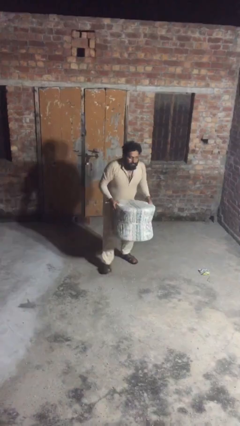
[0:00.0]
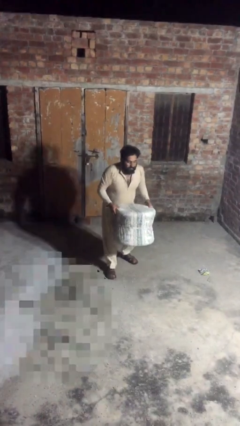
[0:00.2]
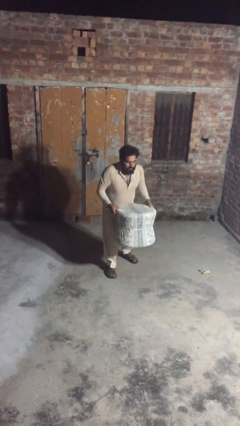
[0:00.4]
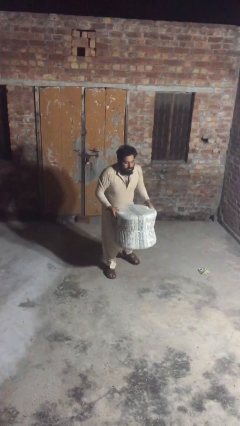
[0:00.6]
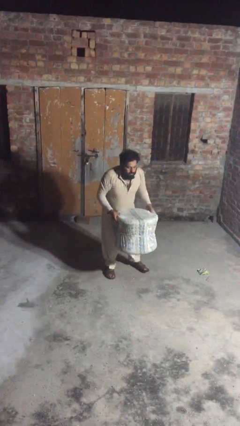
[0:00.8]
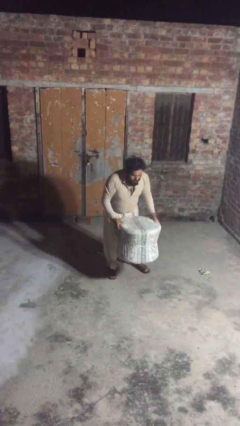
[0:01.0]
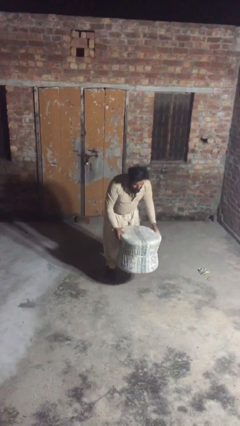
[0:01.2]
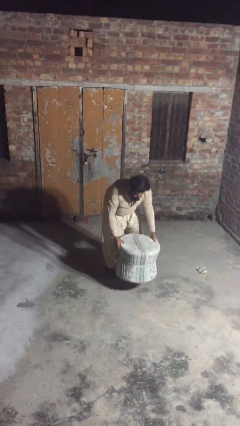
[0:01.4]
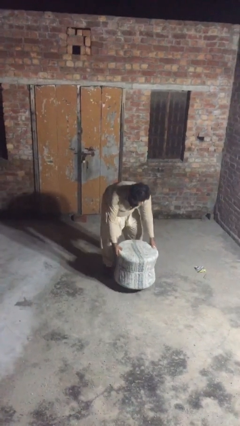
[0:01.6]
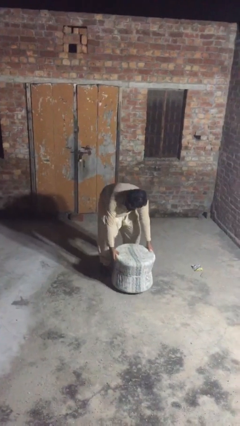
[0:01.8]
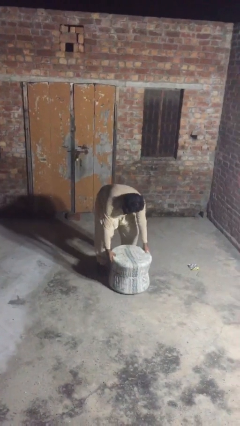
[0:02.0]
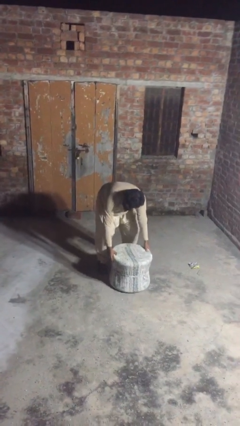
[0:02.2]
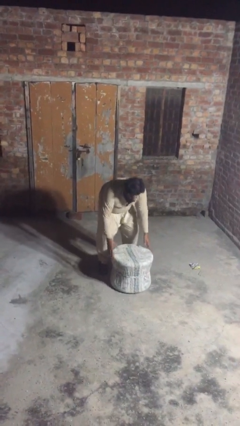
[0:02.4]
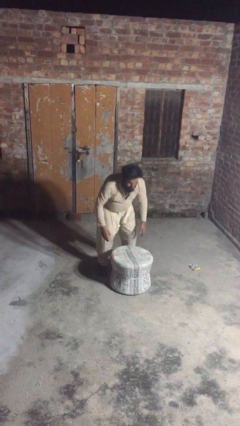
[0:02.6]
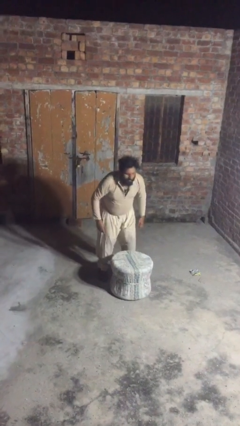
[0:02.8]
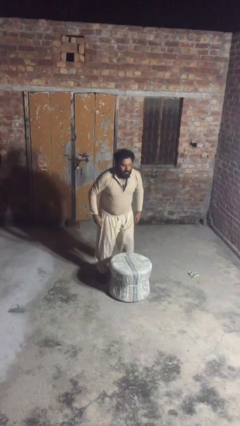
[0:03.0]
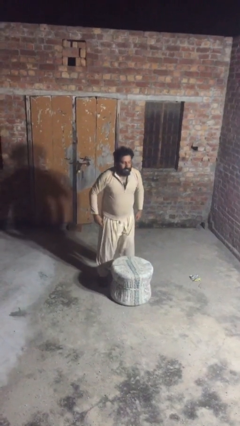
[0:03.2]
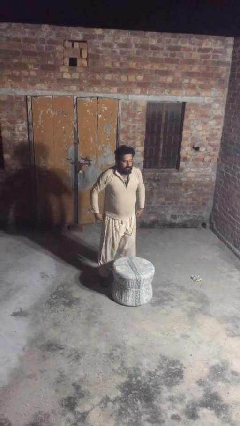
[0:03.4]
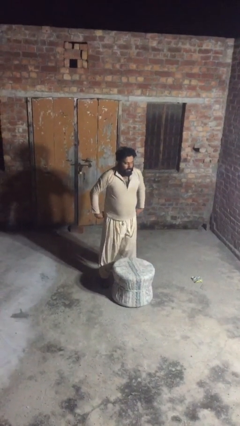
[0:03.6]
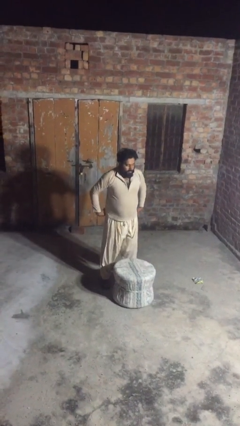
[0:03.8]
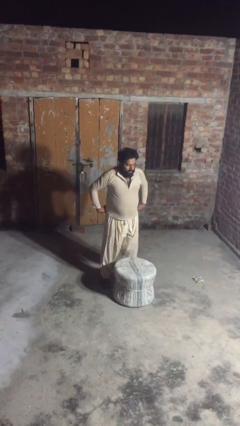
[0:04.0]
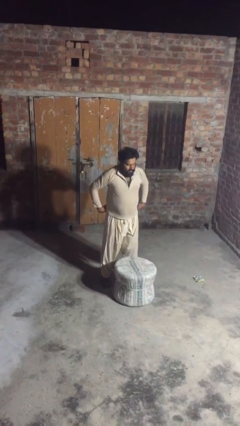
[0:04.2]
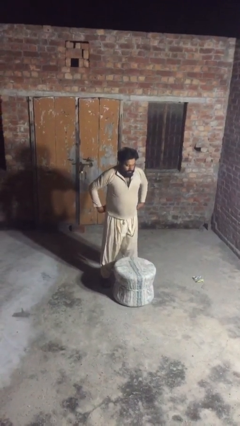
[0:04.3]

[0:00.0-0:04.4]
person puts down object on floor

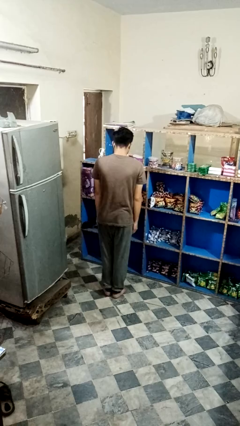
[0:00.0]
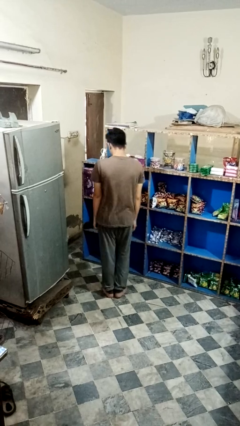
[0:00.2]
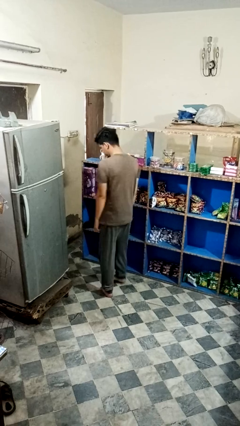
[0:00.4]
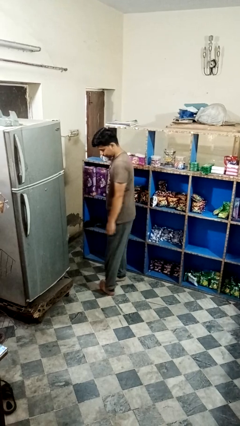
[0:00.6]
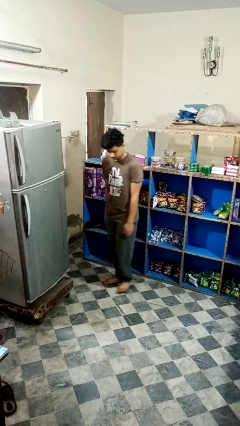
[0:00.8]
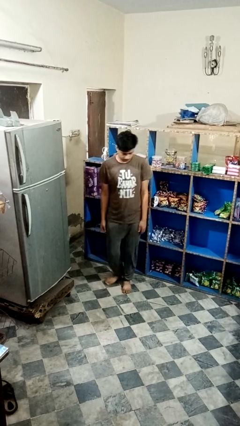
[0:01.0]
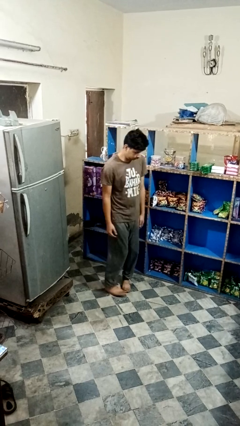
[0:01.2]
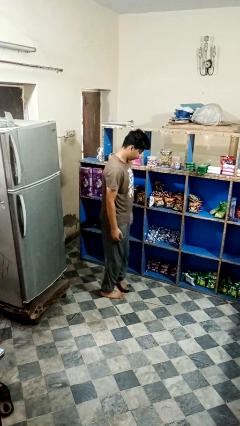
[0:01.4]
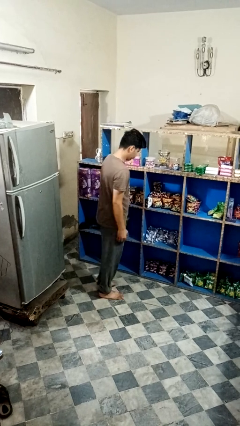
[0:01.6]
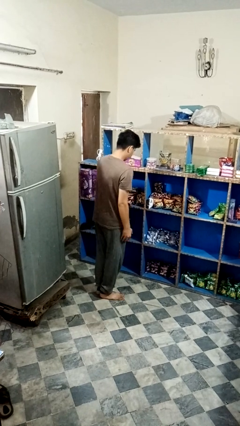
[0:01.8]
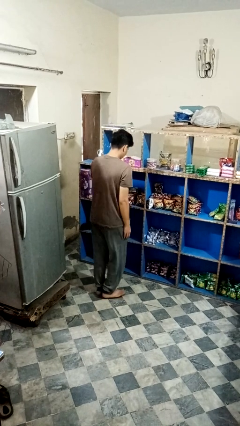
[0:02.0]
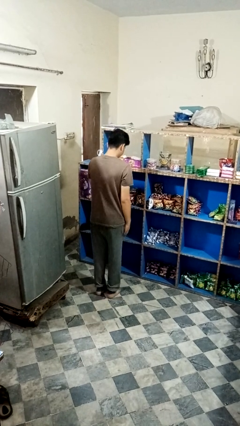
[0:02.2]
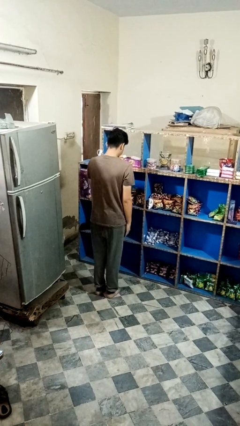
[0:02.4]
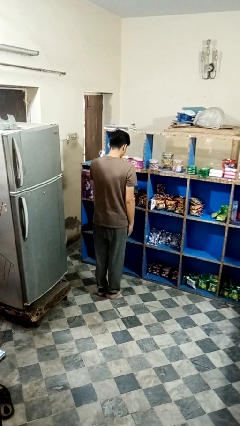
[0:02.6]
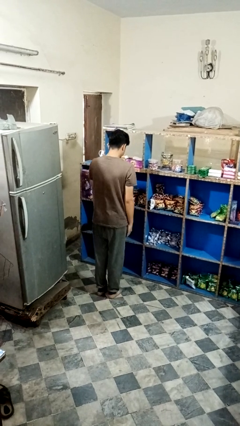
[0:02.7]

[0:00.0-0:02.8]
person twirls

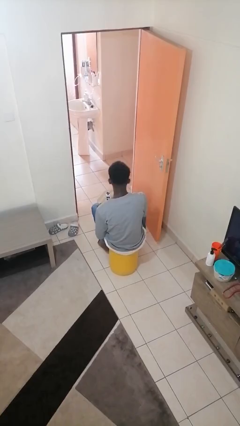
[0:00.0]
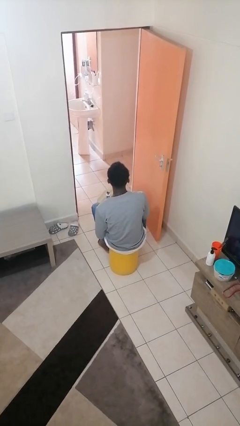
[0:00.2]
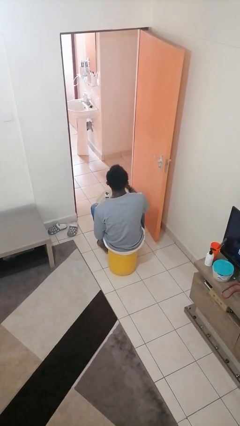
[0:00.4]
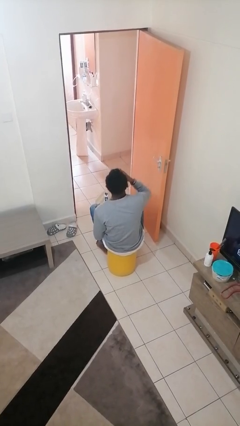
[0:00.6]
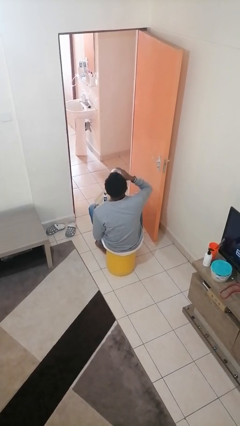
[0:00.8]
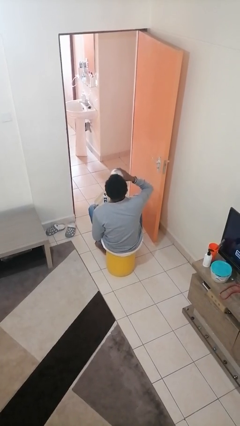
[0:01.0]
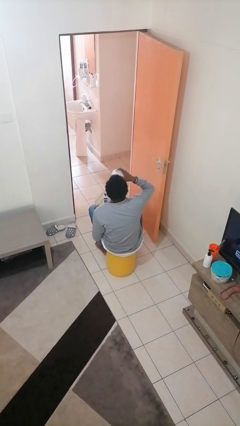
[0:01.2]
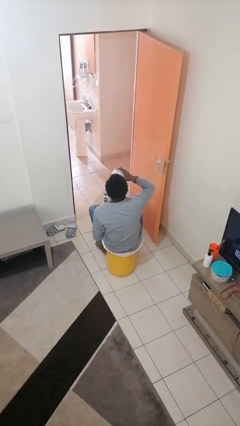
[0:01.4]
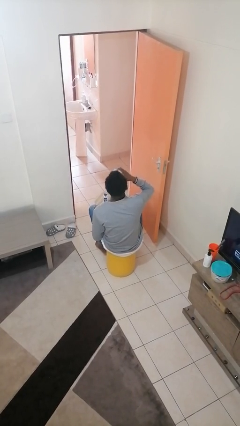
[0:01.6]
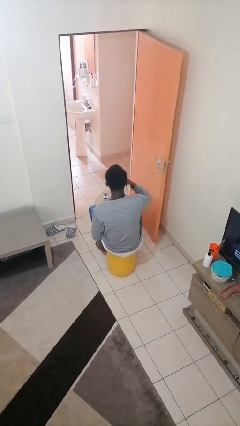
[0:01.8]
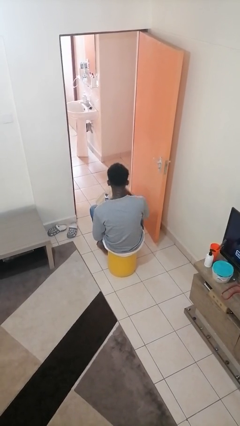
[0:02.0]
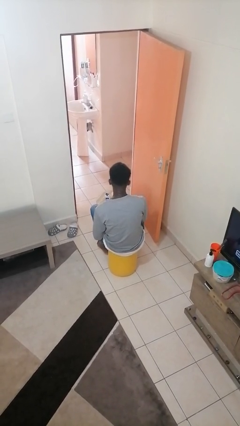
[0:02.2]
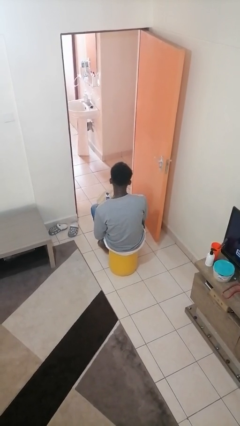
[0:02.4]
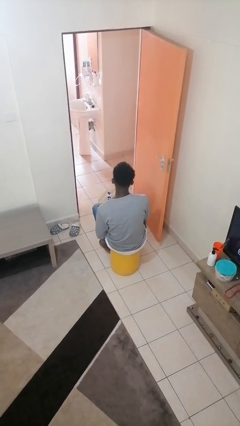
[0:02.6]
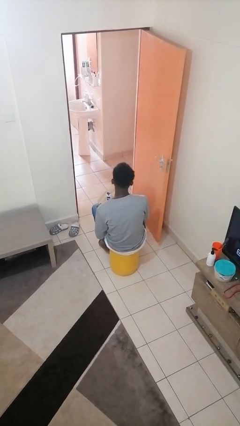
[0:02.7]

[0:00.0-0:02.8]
person drinks from cup

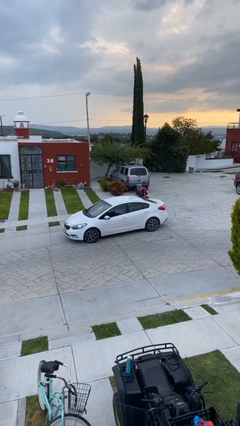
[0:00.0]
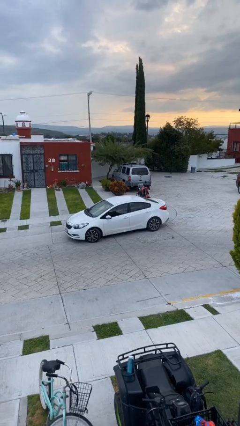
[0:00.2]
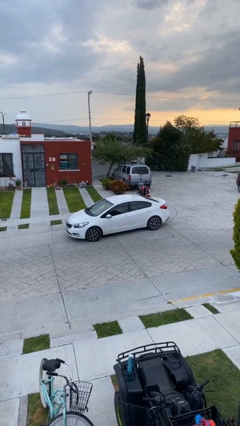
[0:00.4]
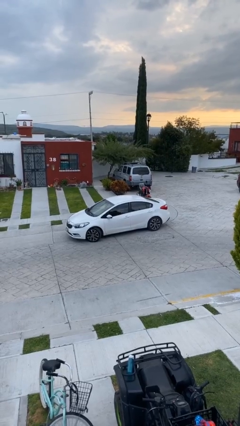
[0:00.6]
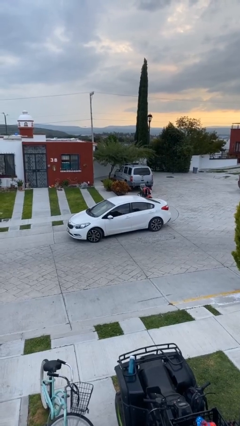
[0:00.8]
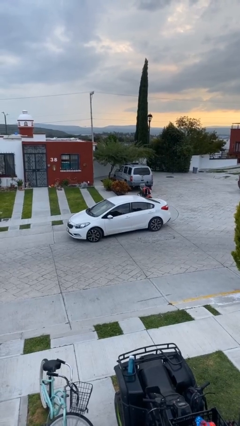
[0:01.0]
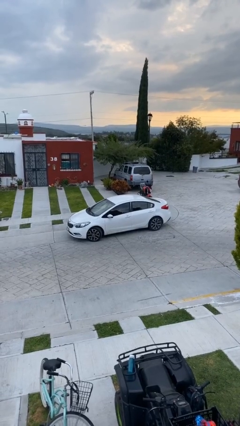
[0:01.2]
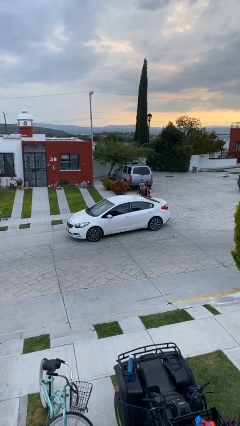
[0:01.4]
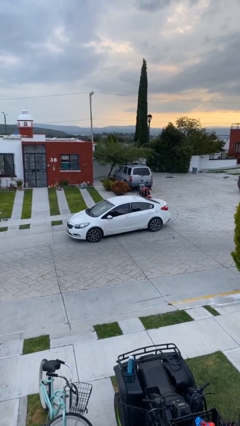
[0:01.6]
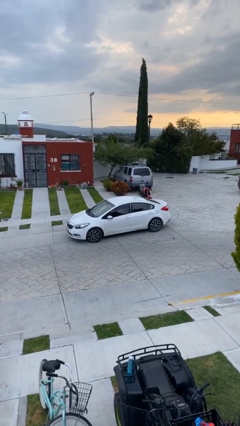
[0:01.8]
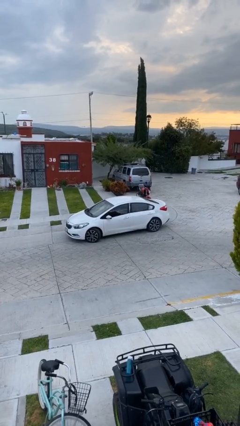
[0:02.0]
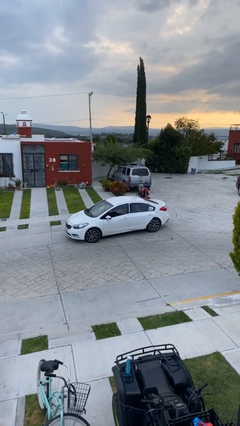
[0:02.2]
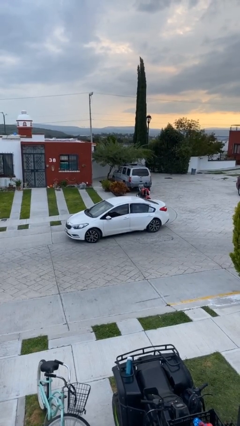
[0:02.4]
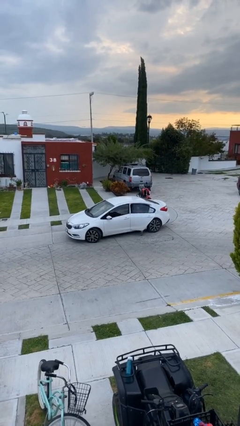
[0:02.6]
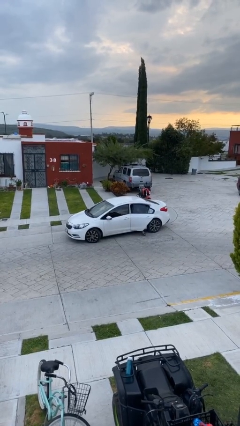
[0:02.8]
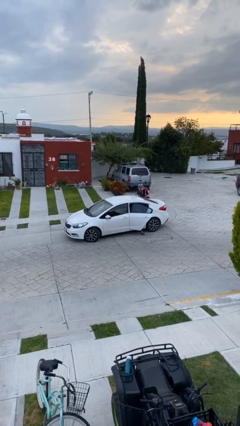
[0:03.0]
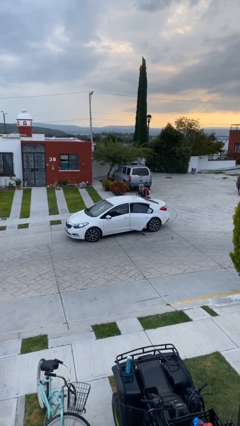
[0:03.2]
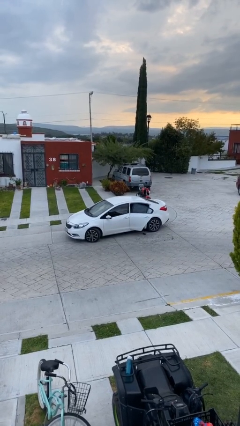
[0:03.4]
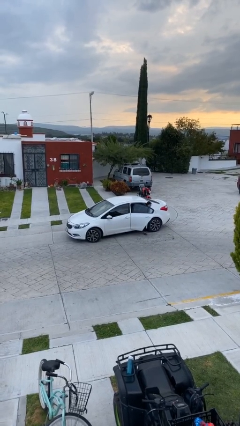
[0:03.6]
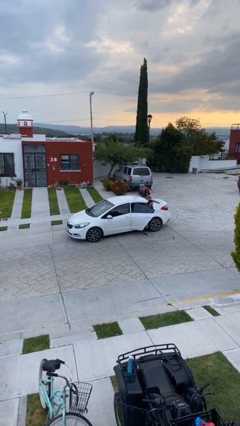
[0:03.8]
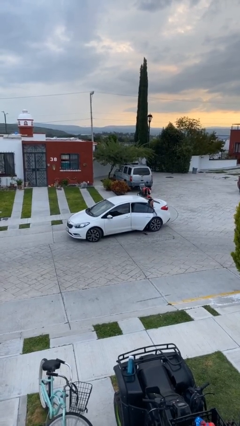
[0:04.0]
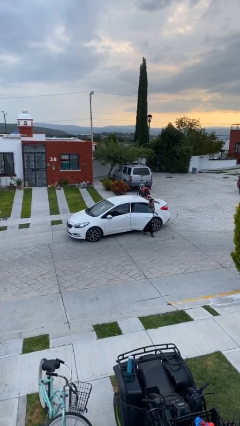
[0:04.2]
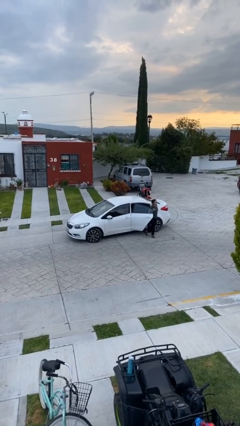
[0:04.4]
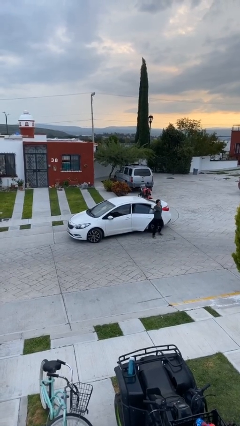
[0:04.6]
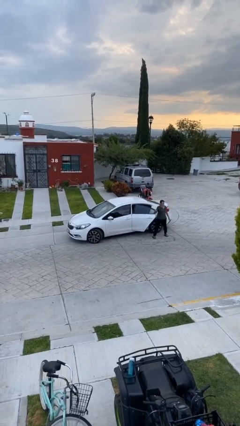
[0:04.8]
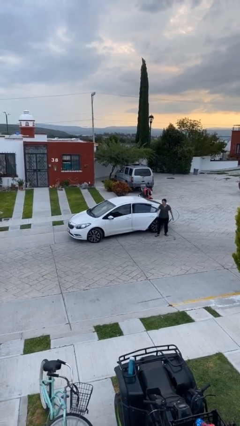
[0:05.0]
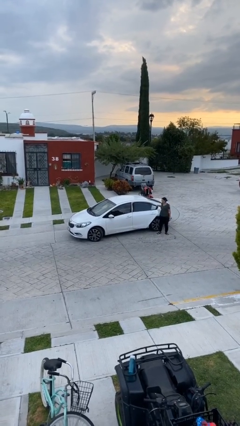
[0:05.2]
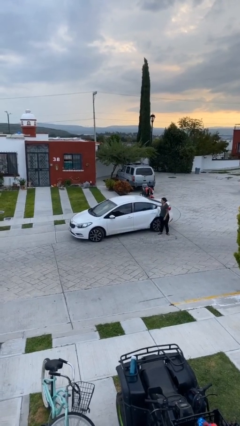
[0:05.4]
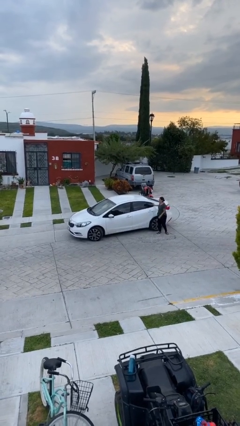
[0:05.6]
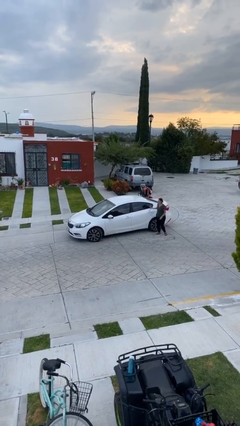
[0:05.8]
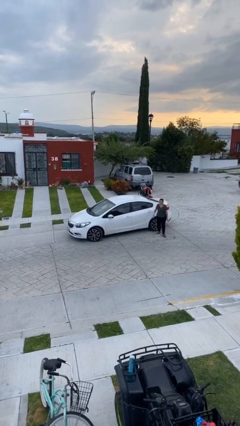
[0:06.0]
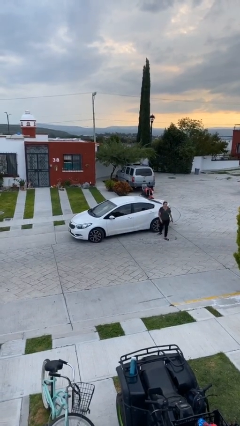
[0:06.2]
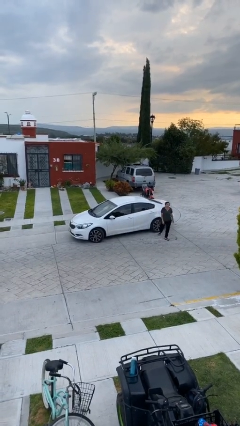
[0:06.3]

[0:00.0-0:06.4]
car drops off person

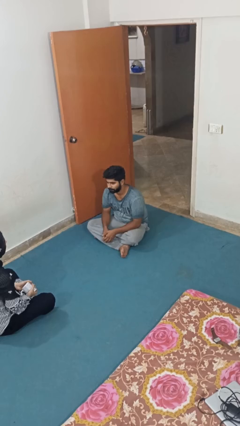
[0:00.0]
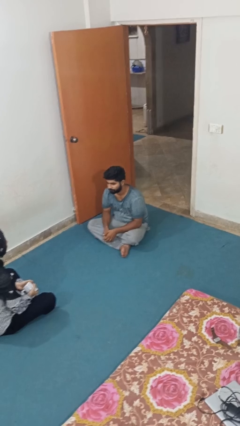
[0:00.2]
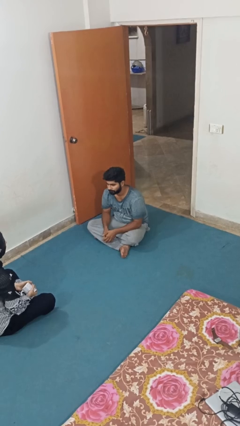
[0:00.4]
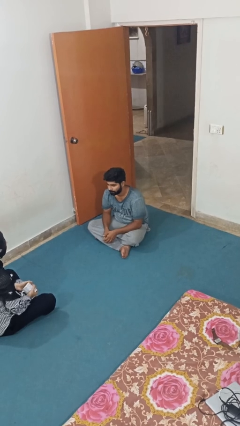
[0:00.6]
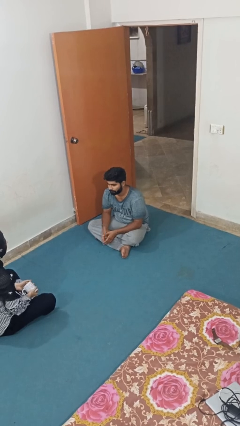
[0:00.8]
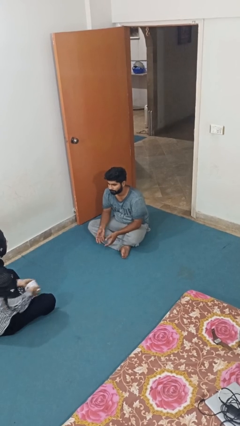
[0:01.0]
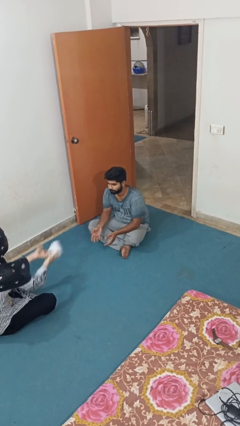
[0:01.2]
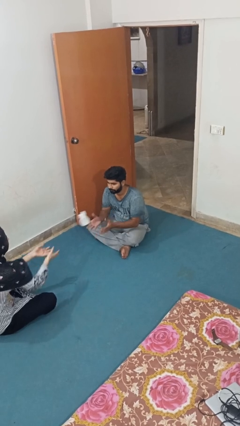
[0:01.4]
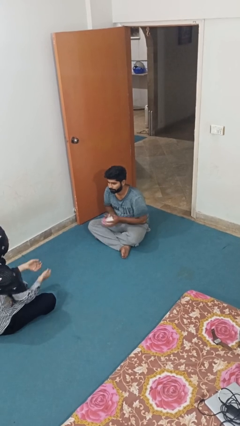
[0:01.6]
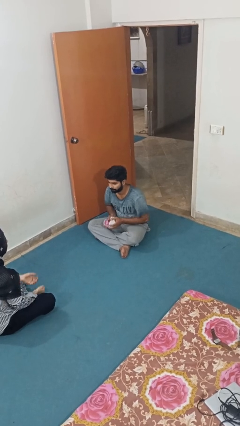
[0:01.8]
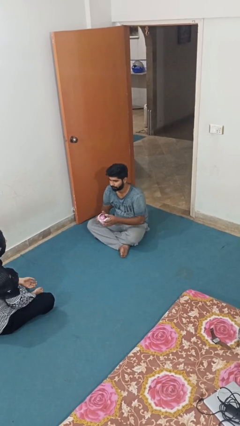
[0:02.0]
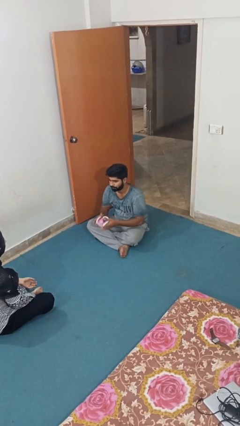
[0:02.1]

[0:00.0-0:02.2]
person catches object from person
